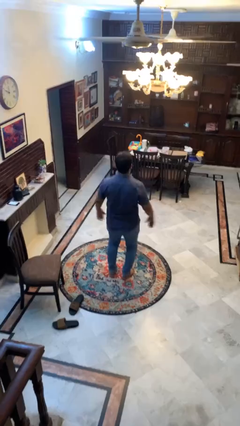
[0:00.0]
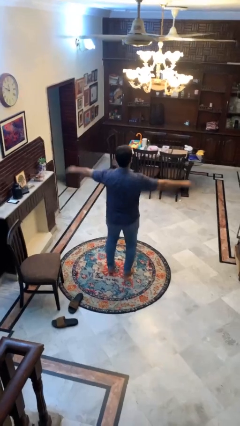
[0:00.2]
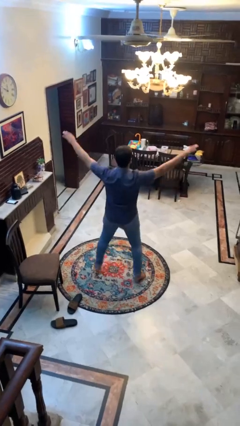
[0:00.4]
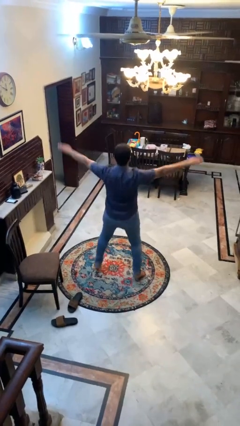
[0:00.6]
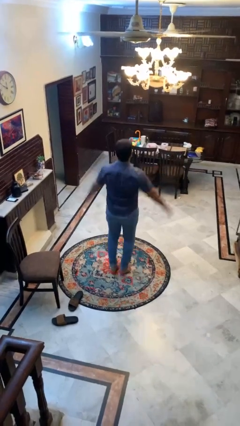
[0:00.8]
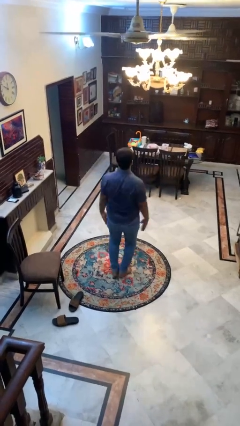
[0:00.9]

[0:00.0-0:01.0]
person exercises with jumping jacks

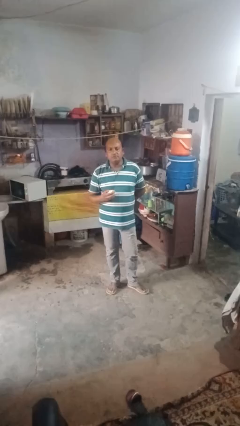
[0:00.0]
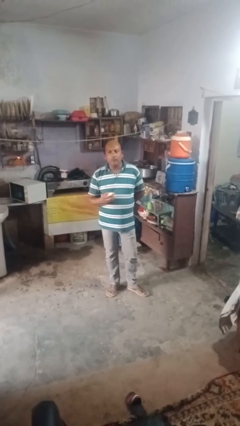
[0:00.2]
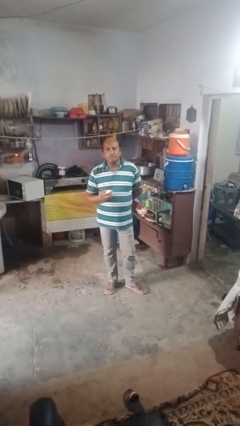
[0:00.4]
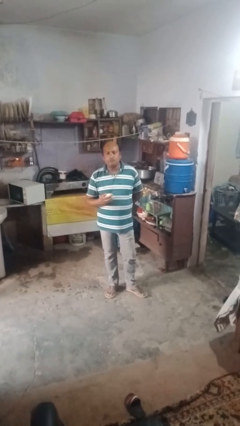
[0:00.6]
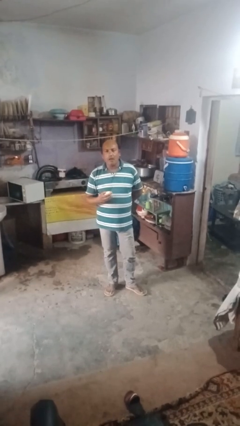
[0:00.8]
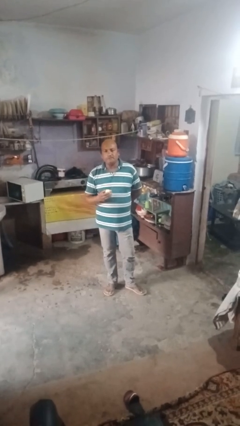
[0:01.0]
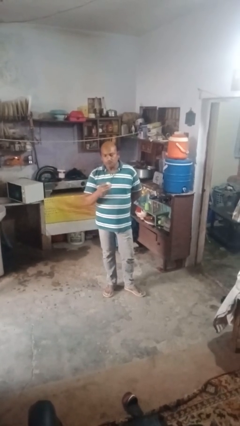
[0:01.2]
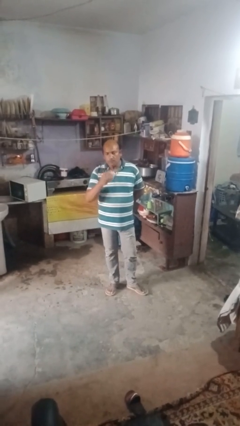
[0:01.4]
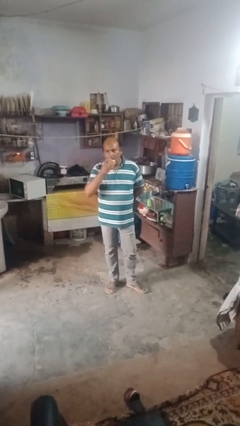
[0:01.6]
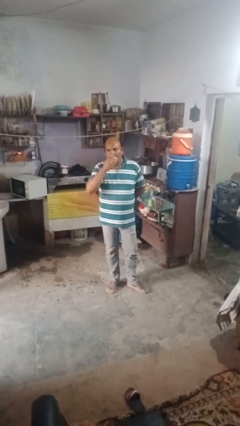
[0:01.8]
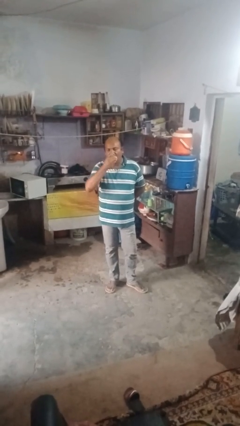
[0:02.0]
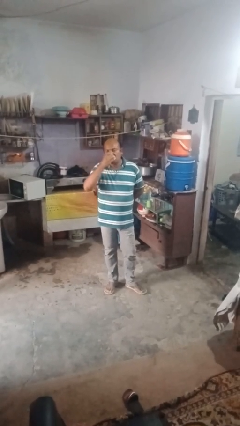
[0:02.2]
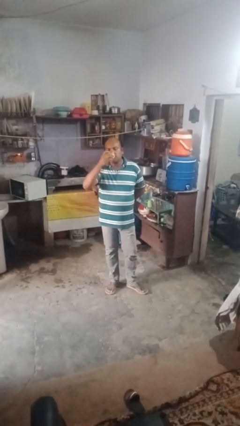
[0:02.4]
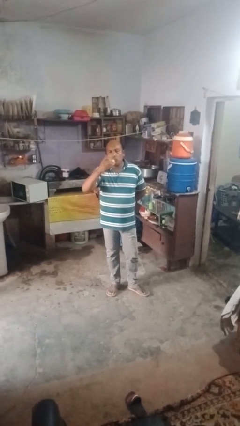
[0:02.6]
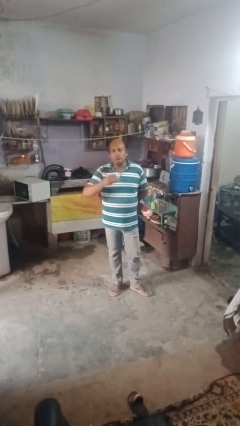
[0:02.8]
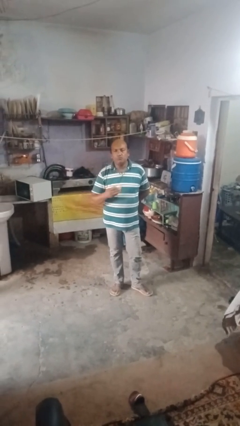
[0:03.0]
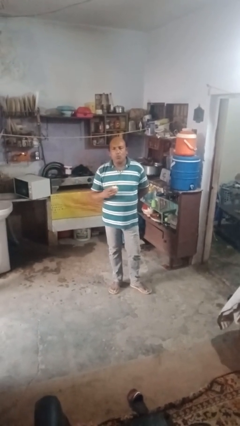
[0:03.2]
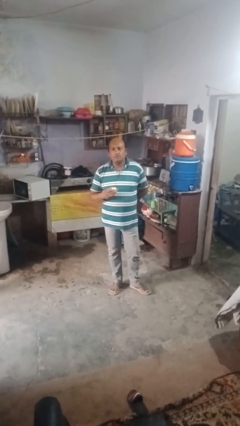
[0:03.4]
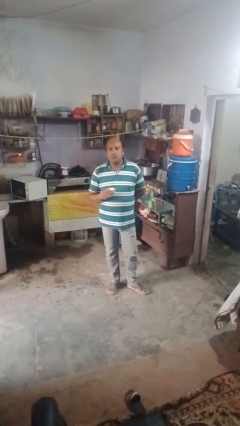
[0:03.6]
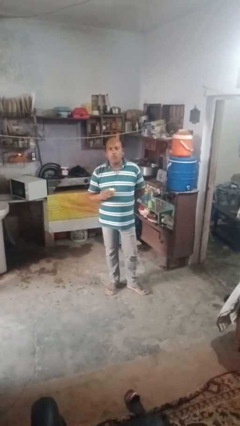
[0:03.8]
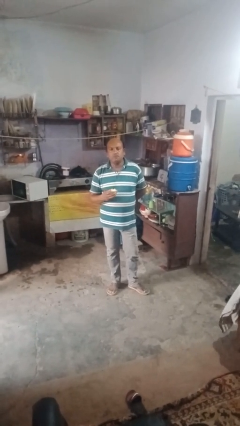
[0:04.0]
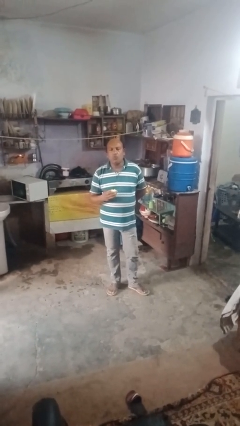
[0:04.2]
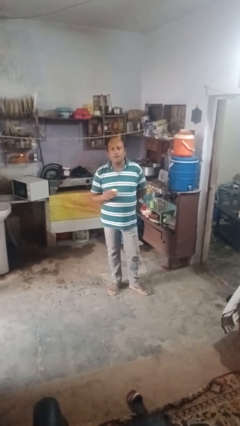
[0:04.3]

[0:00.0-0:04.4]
person eats apple

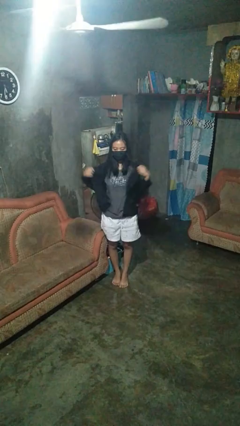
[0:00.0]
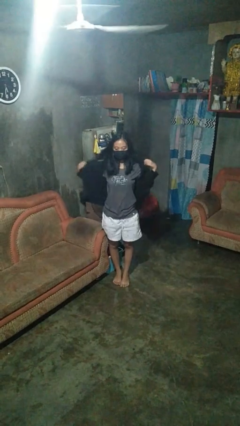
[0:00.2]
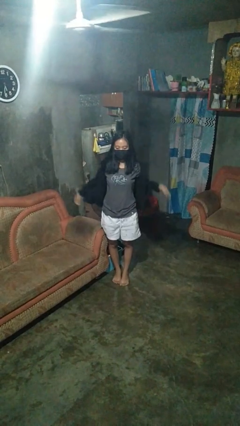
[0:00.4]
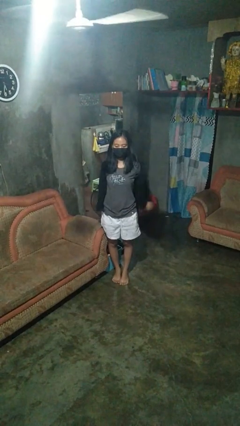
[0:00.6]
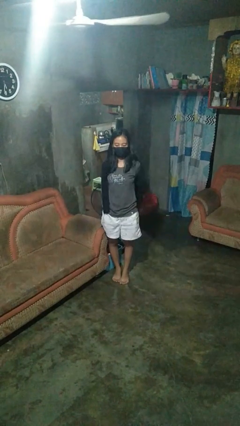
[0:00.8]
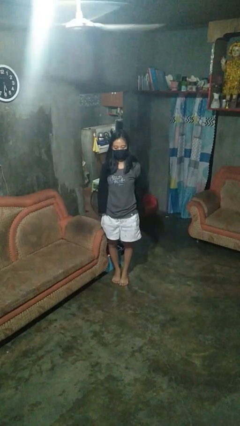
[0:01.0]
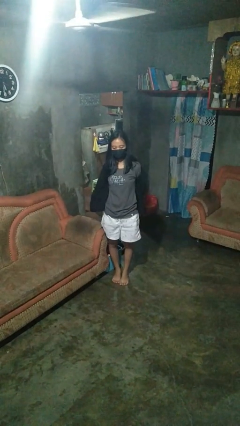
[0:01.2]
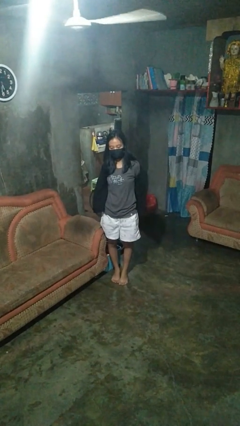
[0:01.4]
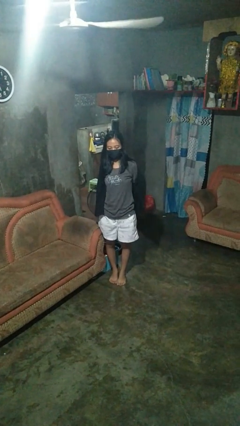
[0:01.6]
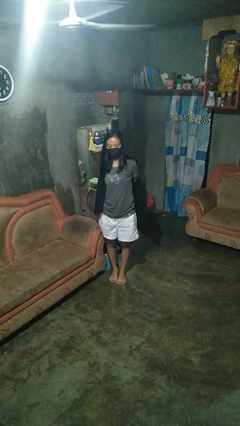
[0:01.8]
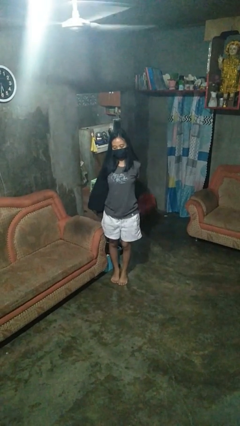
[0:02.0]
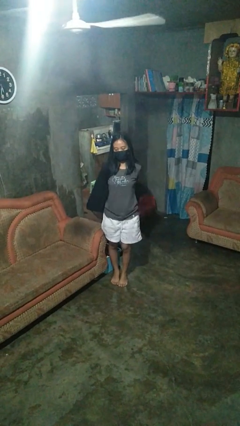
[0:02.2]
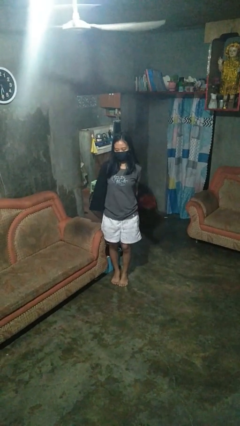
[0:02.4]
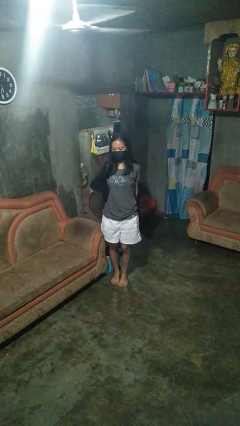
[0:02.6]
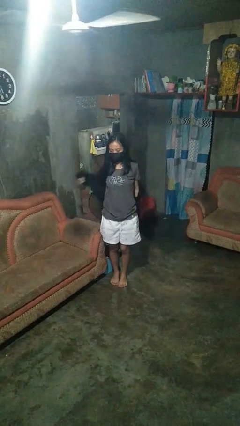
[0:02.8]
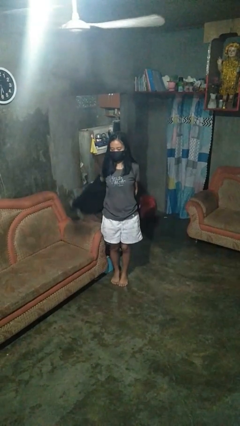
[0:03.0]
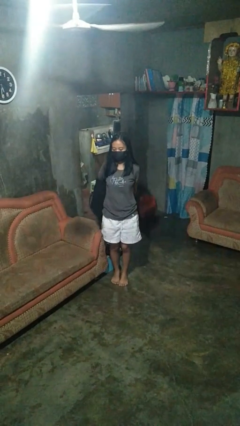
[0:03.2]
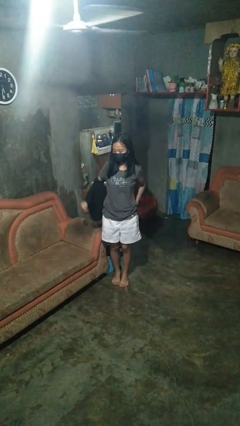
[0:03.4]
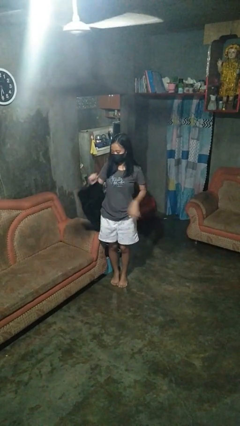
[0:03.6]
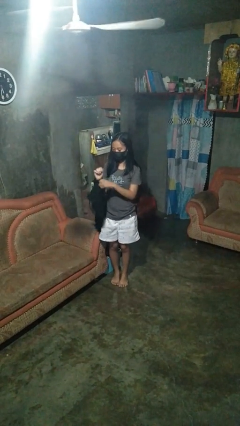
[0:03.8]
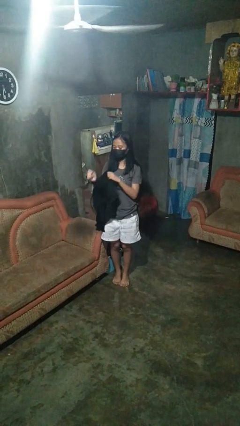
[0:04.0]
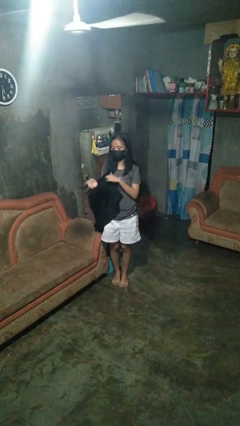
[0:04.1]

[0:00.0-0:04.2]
person takes off shirt

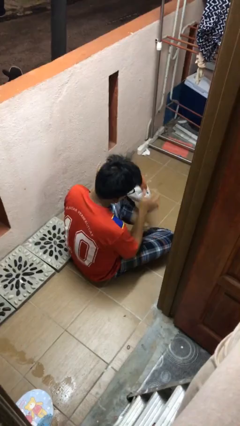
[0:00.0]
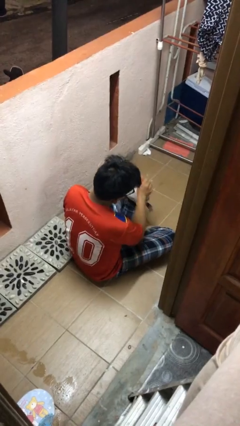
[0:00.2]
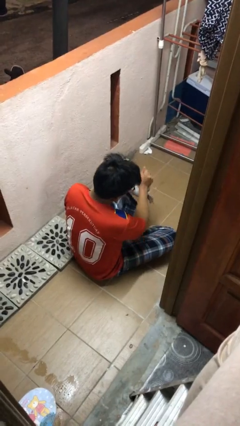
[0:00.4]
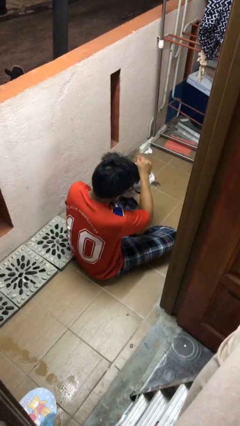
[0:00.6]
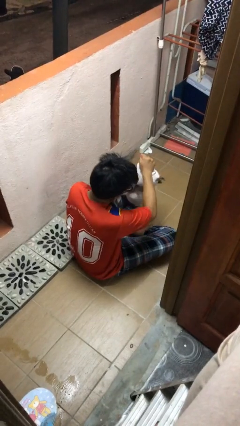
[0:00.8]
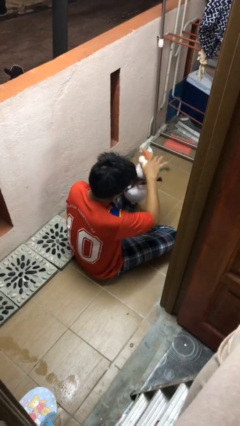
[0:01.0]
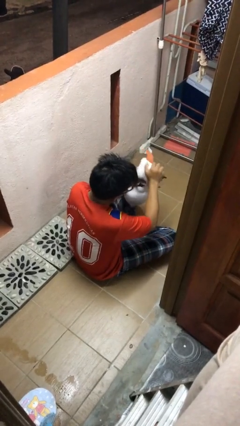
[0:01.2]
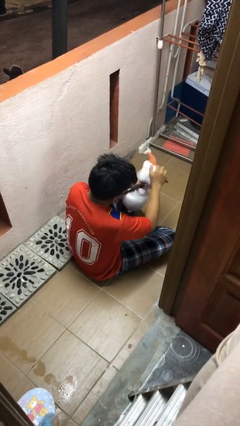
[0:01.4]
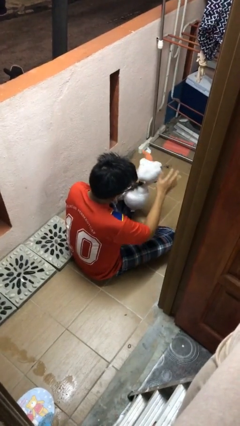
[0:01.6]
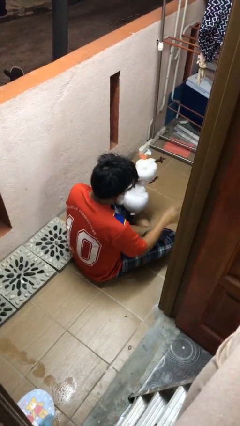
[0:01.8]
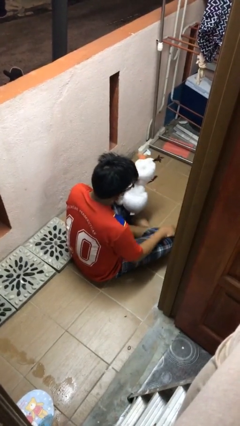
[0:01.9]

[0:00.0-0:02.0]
person squeezes object

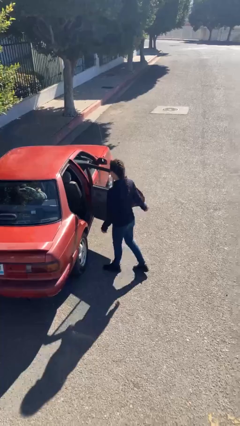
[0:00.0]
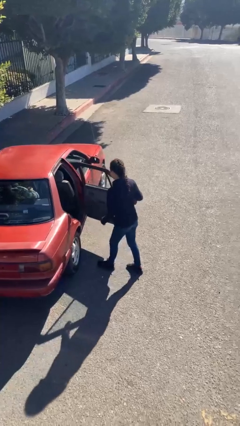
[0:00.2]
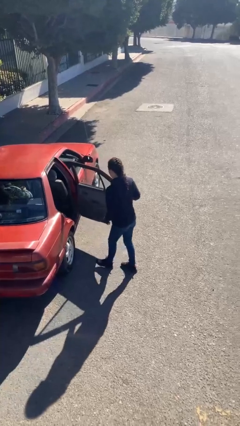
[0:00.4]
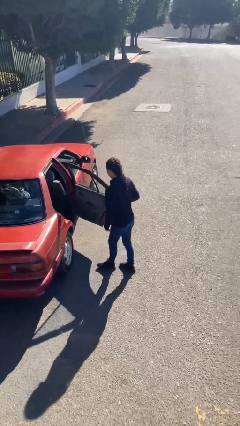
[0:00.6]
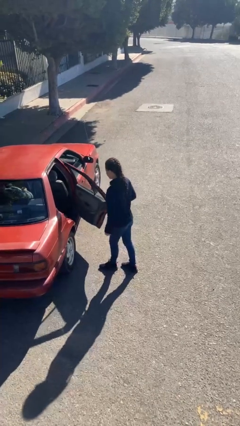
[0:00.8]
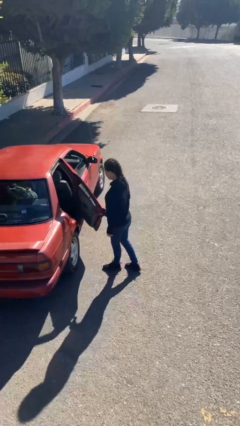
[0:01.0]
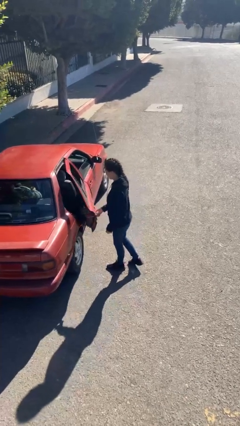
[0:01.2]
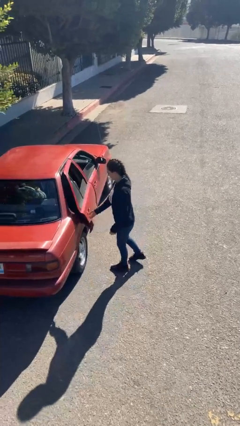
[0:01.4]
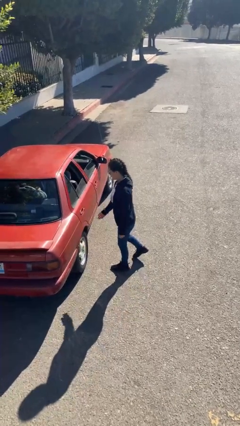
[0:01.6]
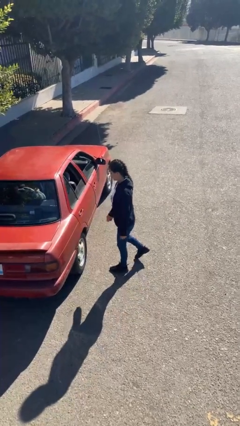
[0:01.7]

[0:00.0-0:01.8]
person closes car door

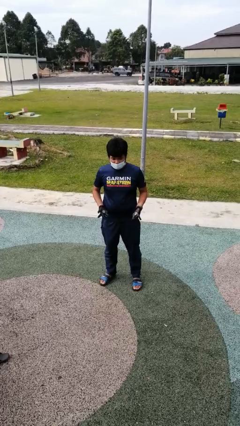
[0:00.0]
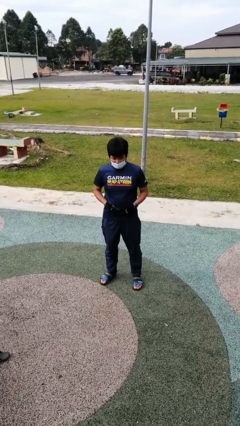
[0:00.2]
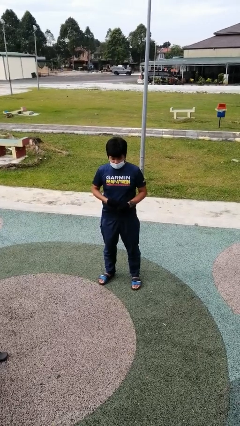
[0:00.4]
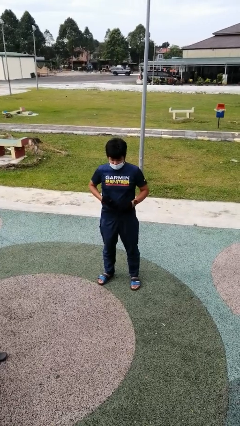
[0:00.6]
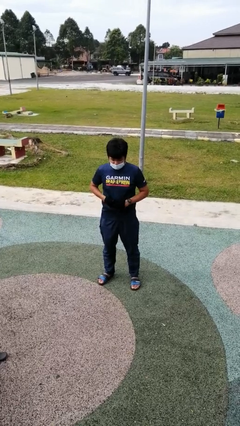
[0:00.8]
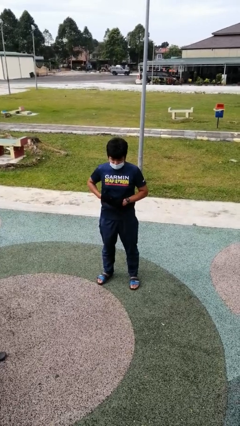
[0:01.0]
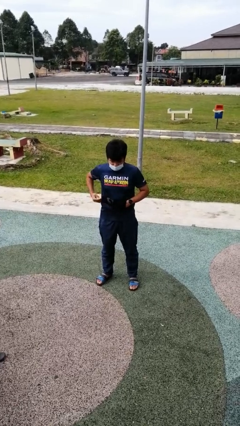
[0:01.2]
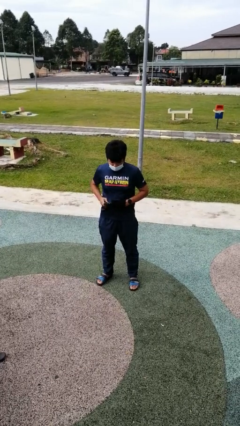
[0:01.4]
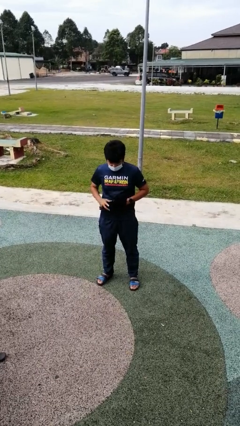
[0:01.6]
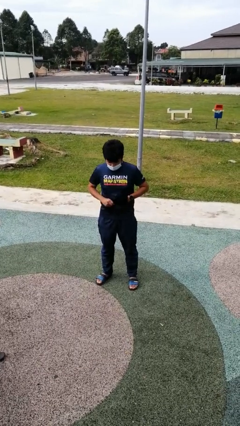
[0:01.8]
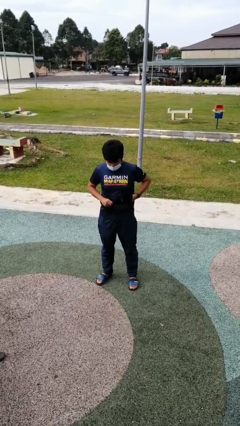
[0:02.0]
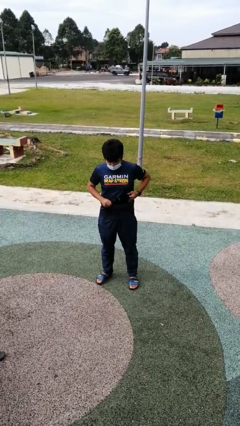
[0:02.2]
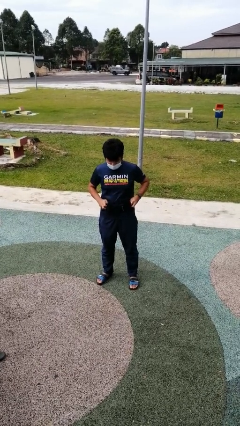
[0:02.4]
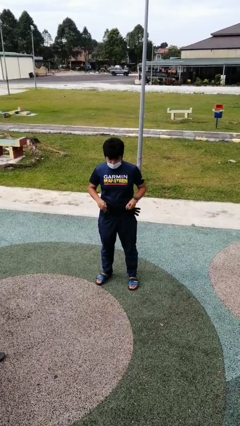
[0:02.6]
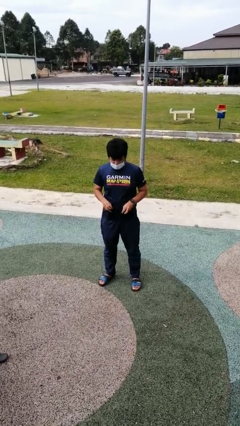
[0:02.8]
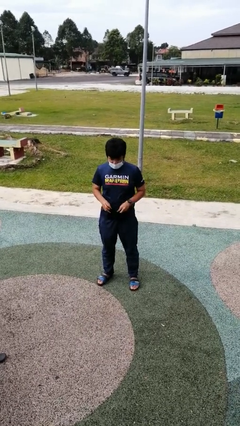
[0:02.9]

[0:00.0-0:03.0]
person takes off gloves

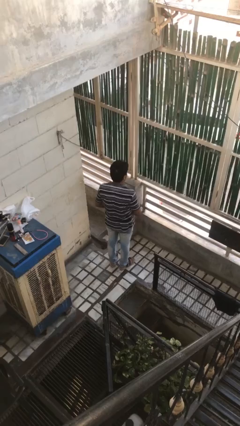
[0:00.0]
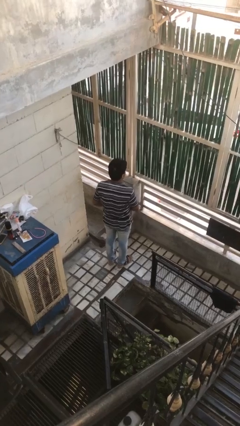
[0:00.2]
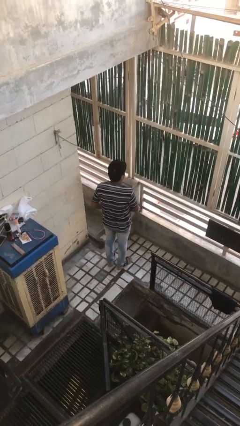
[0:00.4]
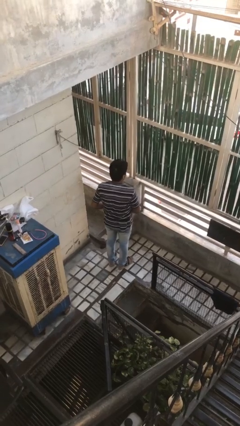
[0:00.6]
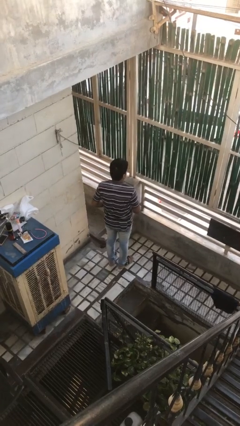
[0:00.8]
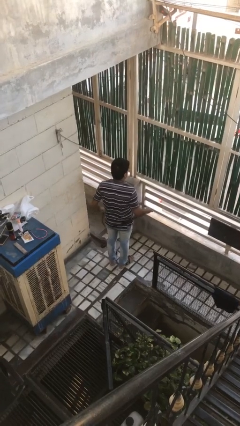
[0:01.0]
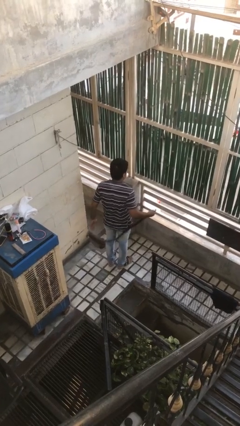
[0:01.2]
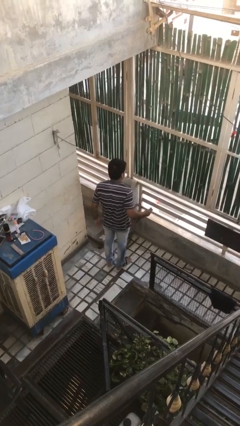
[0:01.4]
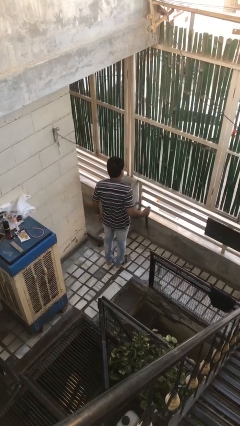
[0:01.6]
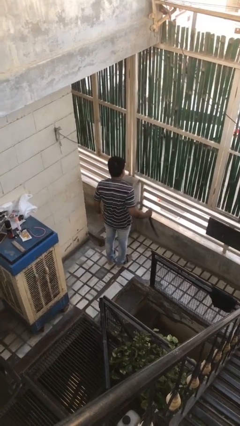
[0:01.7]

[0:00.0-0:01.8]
person takes off belt
